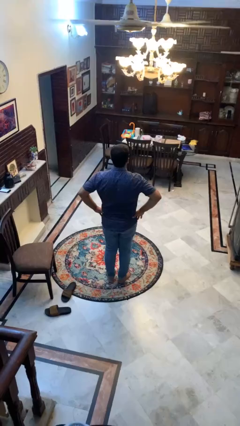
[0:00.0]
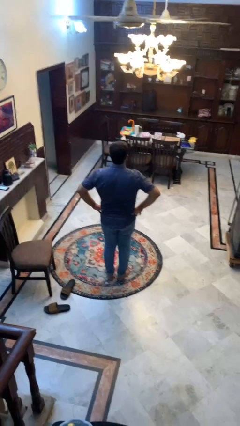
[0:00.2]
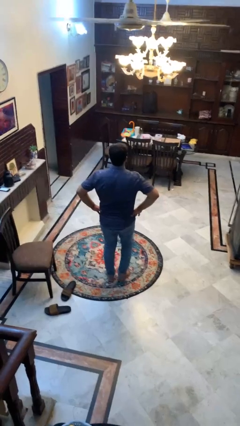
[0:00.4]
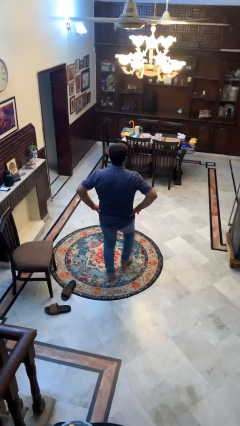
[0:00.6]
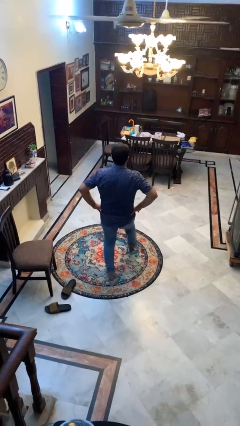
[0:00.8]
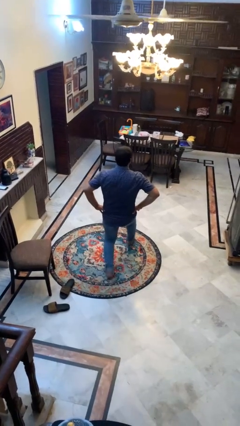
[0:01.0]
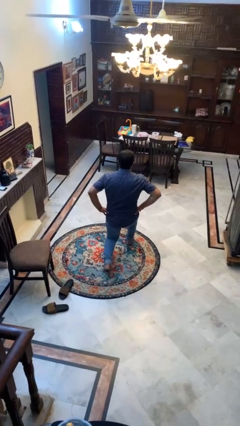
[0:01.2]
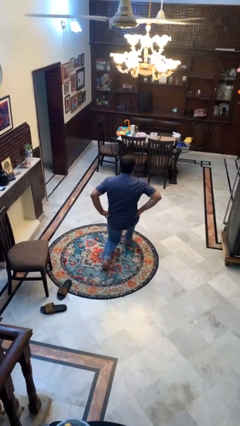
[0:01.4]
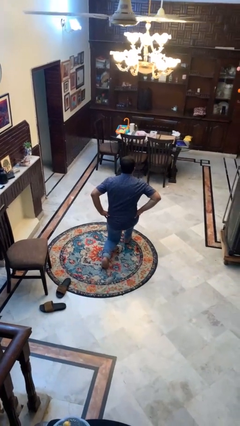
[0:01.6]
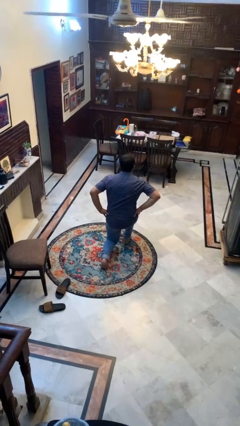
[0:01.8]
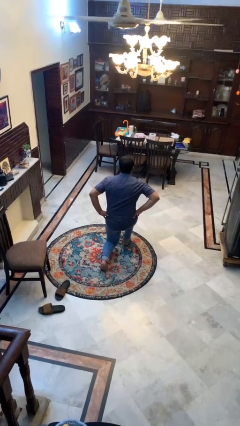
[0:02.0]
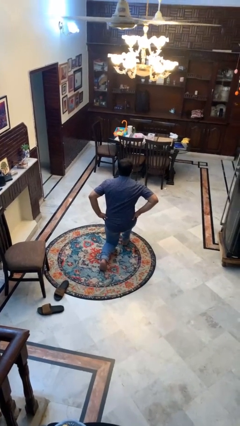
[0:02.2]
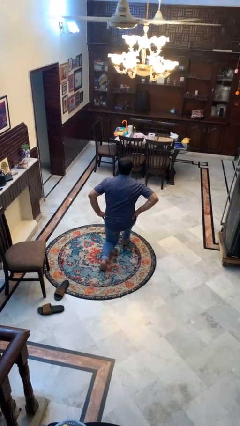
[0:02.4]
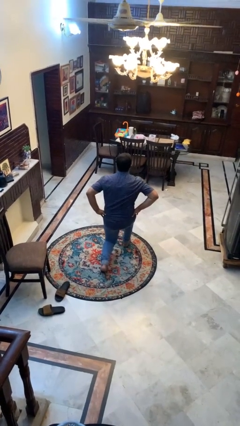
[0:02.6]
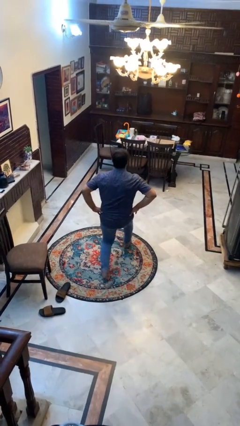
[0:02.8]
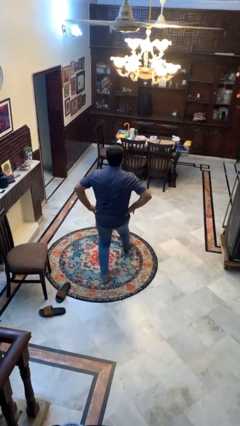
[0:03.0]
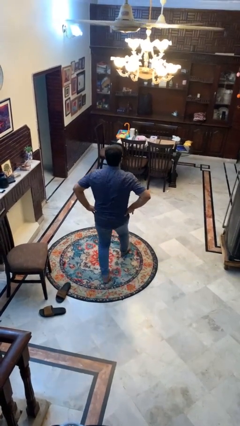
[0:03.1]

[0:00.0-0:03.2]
person exercises with lunges

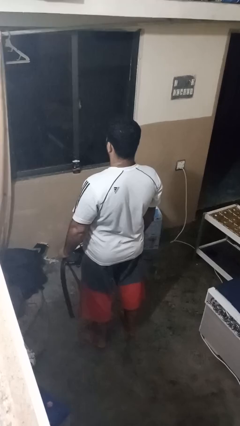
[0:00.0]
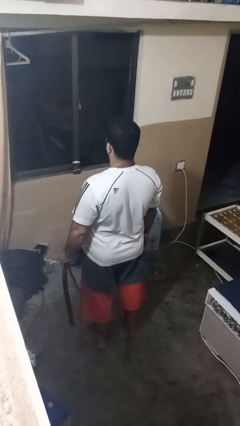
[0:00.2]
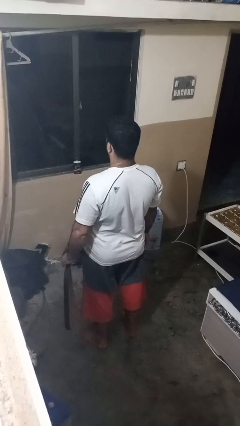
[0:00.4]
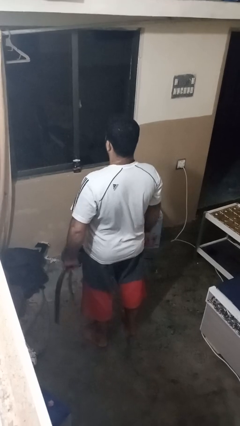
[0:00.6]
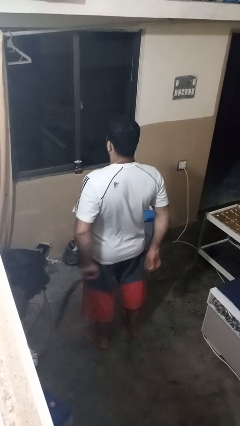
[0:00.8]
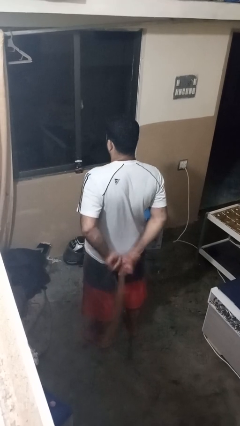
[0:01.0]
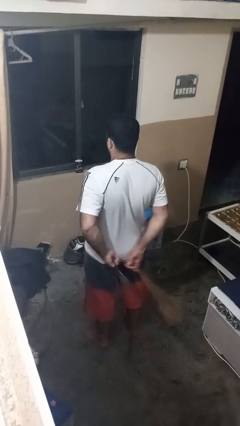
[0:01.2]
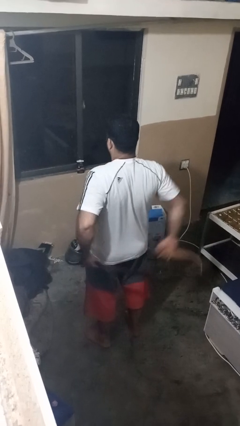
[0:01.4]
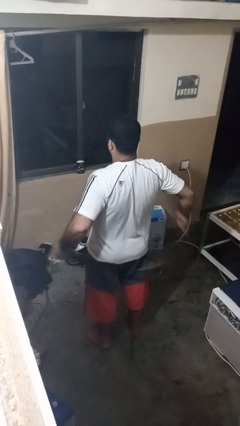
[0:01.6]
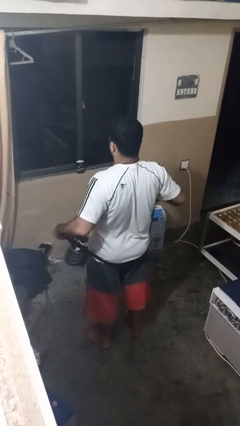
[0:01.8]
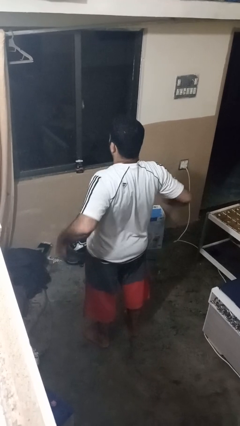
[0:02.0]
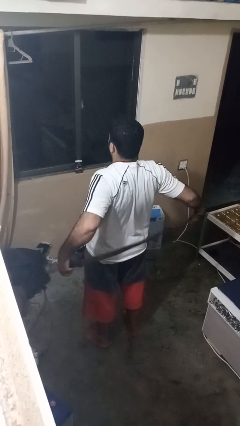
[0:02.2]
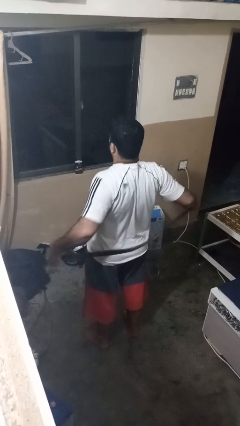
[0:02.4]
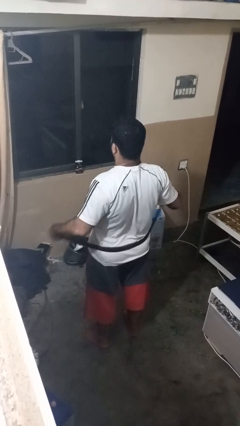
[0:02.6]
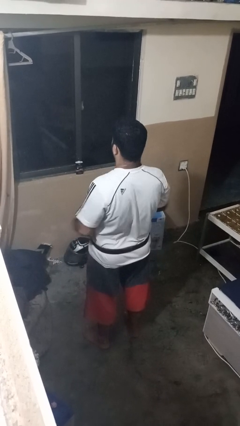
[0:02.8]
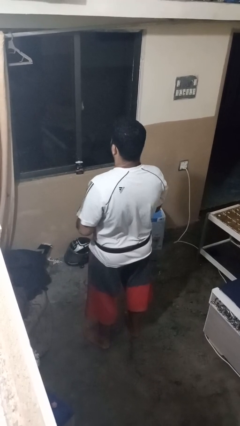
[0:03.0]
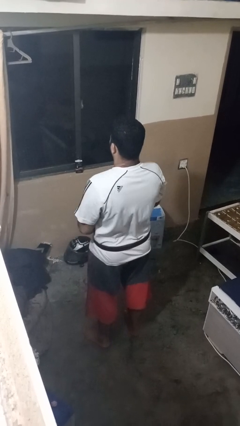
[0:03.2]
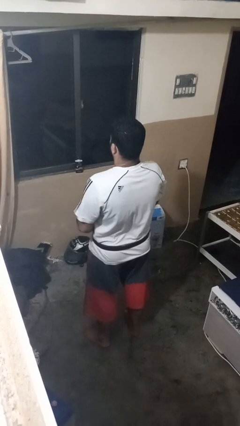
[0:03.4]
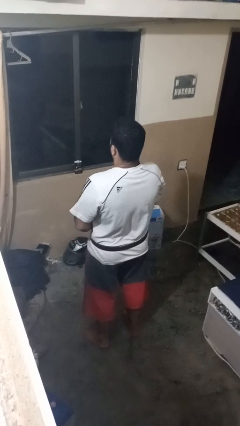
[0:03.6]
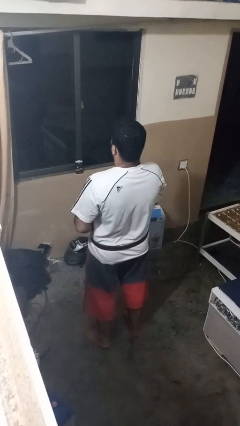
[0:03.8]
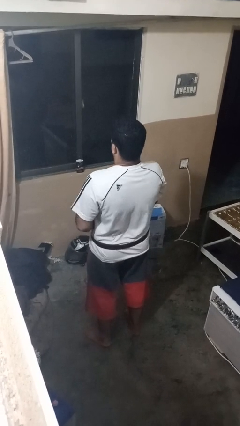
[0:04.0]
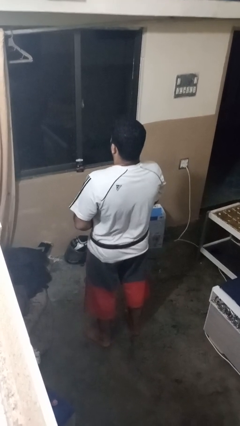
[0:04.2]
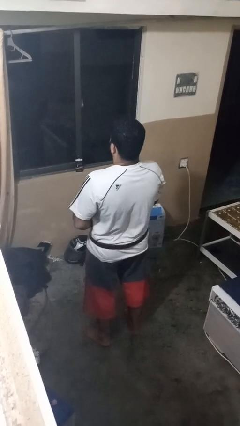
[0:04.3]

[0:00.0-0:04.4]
person puts on belt

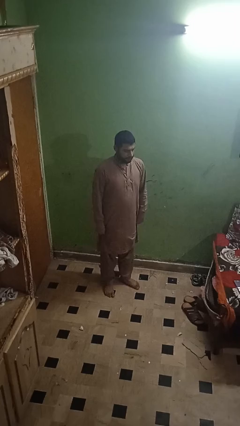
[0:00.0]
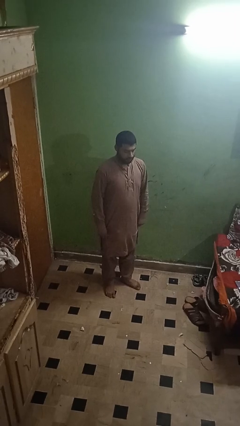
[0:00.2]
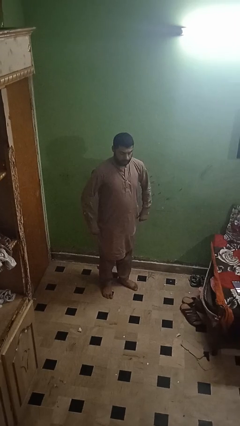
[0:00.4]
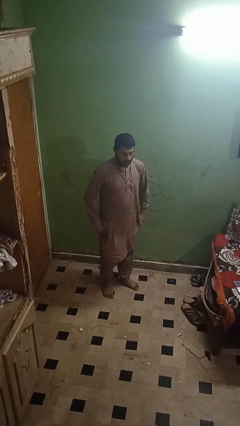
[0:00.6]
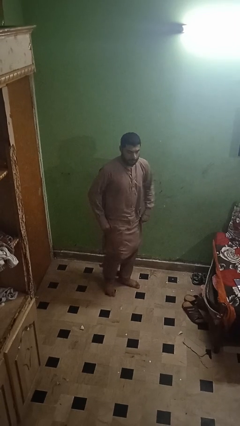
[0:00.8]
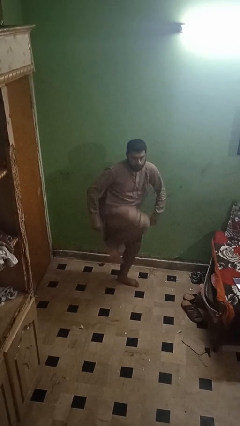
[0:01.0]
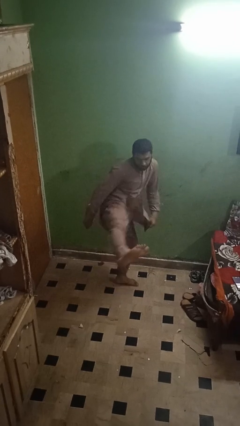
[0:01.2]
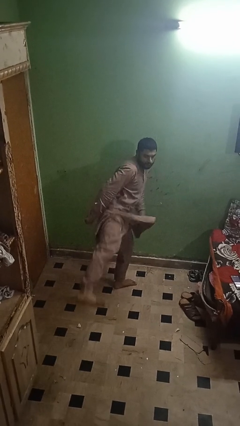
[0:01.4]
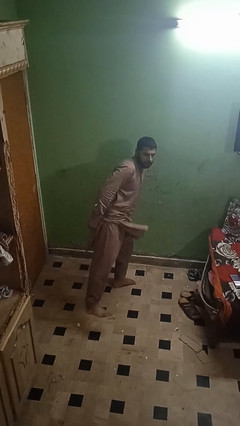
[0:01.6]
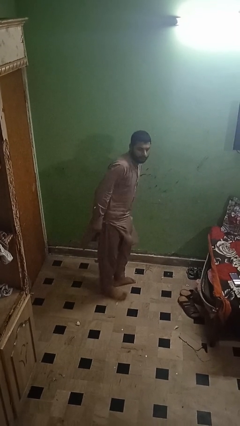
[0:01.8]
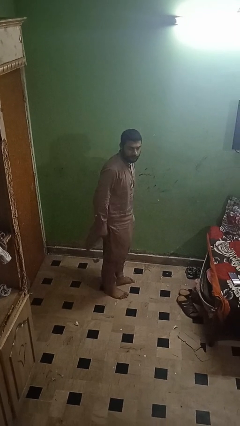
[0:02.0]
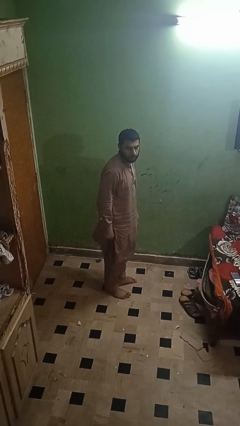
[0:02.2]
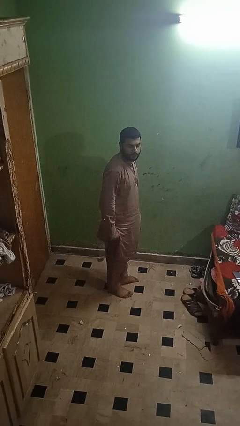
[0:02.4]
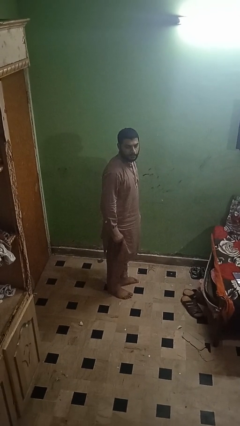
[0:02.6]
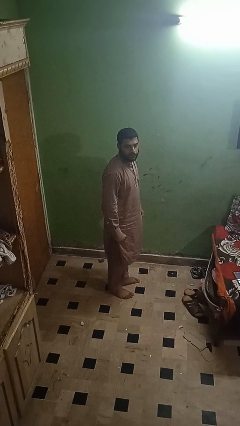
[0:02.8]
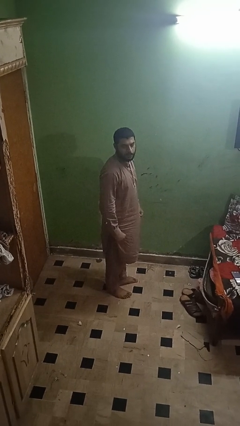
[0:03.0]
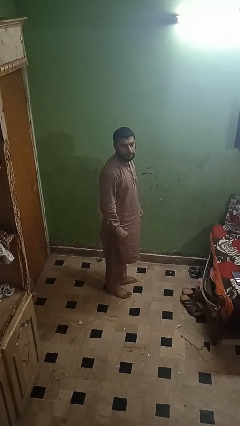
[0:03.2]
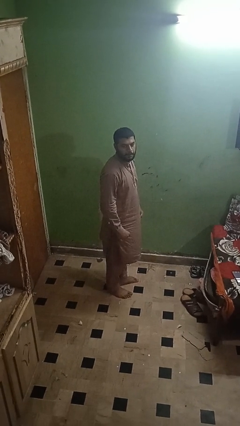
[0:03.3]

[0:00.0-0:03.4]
person karate kicks

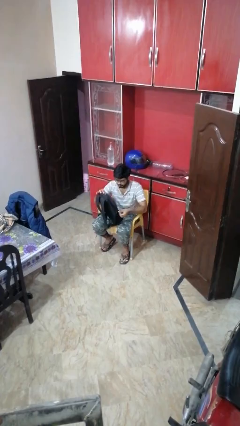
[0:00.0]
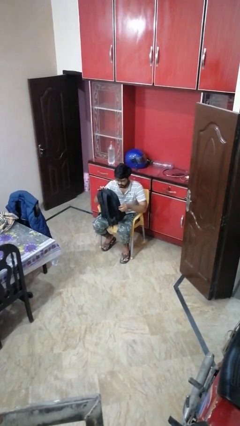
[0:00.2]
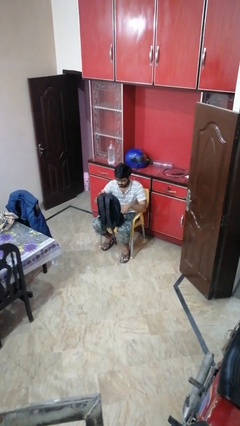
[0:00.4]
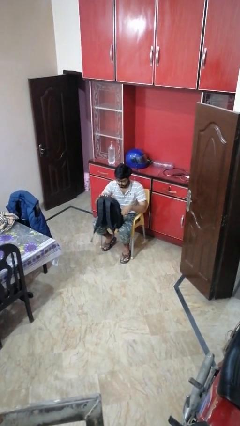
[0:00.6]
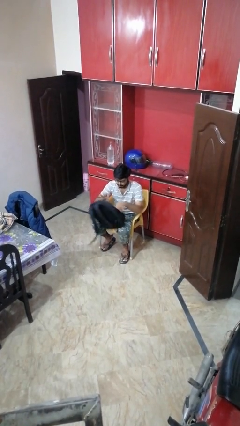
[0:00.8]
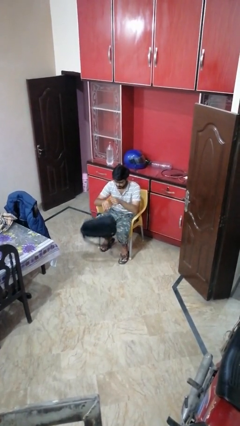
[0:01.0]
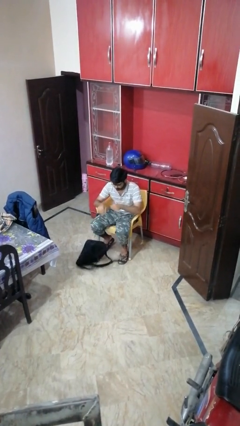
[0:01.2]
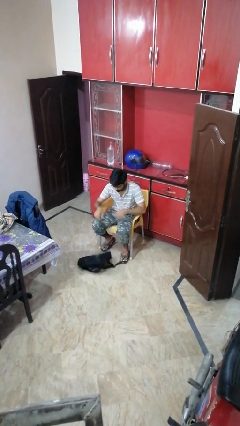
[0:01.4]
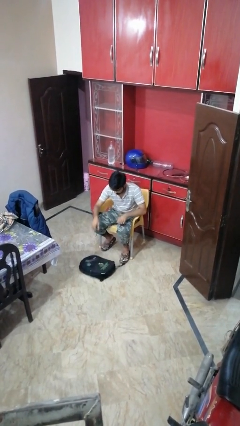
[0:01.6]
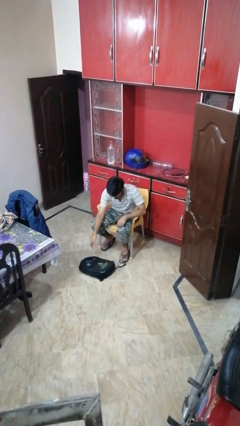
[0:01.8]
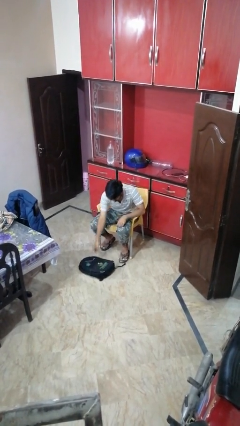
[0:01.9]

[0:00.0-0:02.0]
person drops object

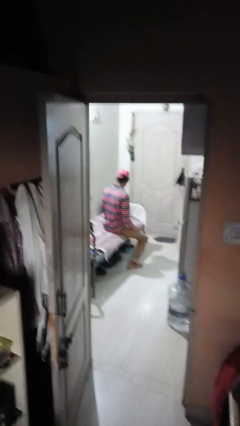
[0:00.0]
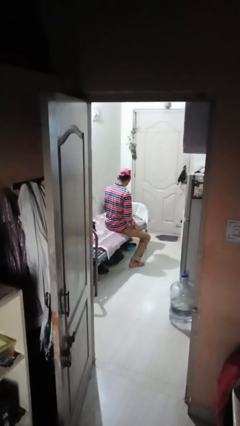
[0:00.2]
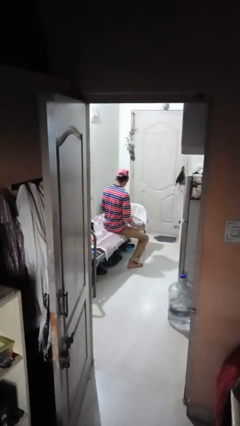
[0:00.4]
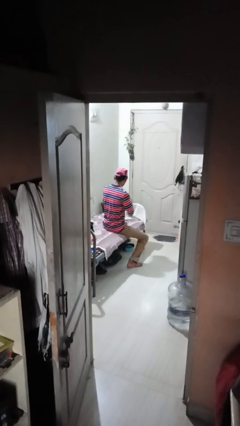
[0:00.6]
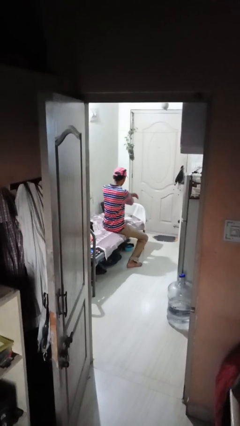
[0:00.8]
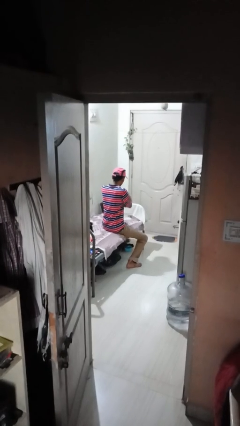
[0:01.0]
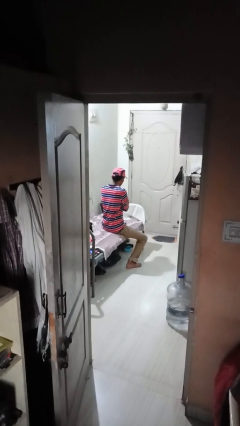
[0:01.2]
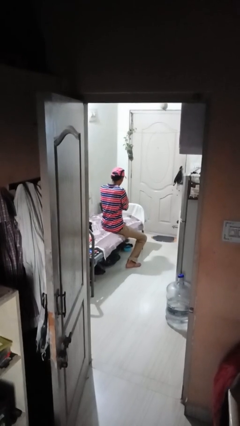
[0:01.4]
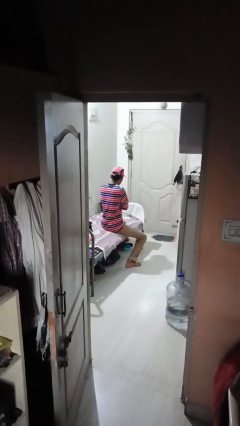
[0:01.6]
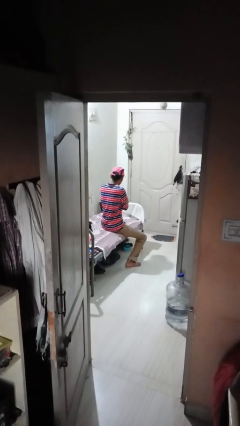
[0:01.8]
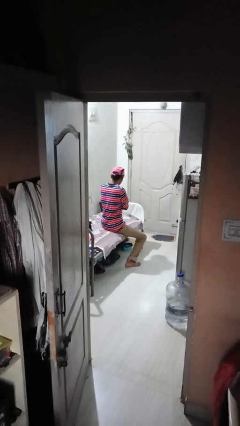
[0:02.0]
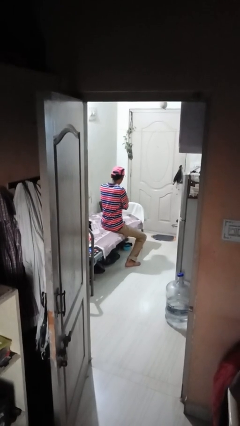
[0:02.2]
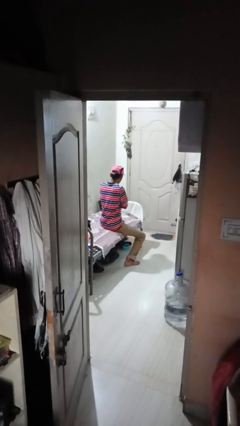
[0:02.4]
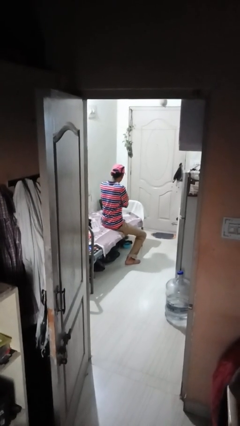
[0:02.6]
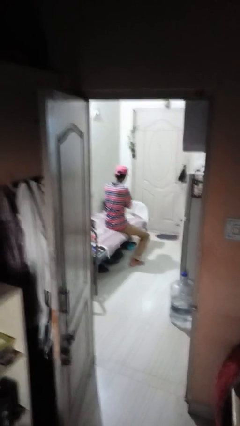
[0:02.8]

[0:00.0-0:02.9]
person crosses arms

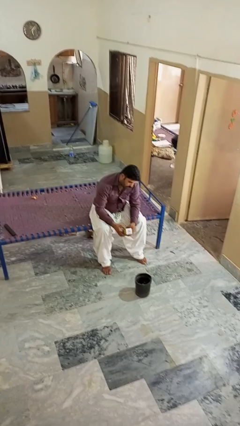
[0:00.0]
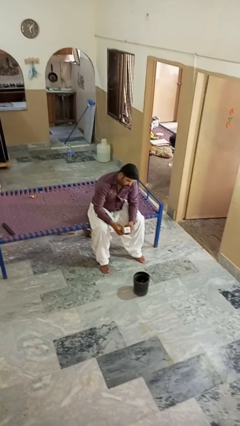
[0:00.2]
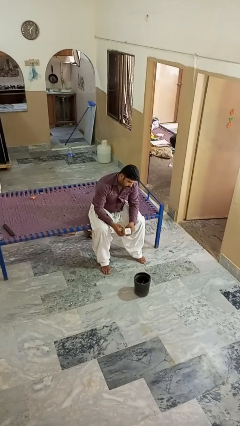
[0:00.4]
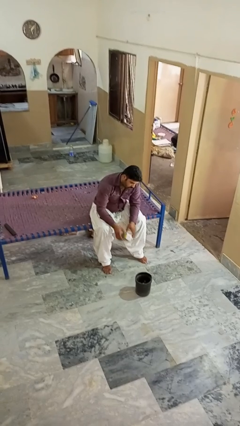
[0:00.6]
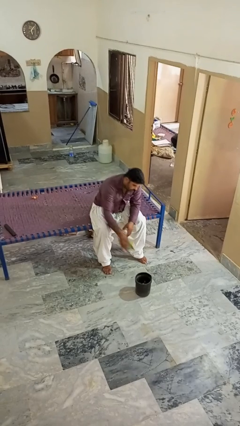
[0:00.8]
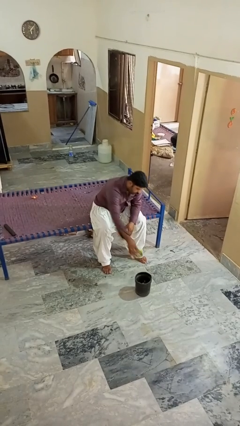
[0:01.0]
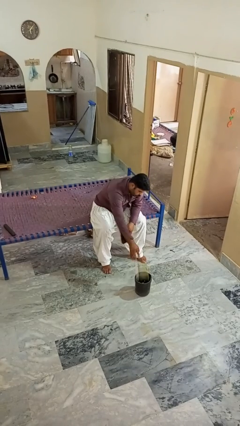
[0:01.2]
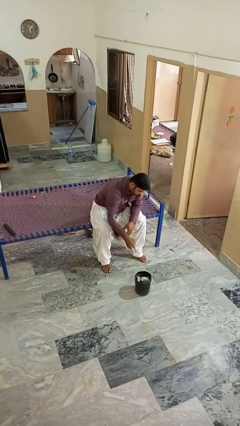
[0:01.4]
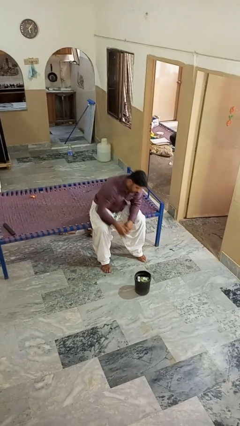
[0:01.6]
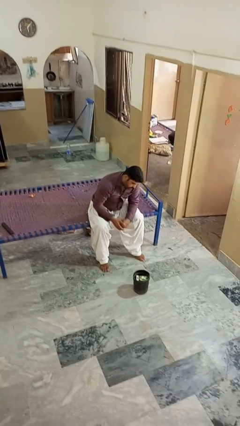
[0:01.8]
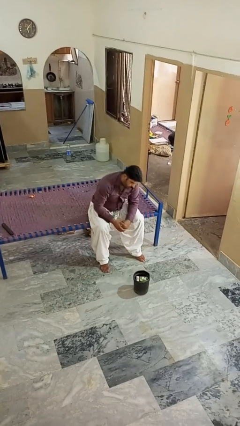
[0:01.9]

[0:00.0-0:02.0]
person puts object into basket
